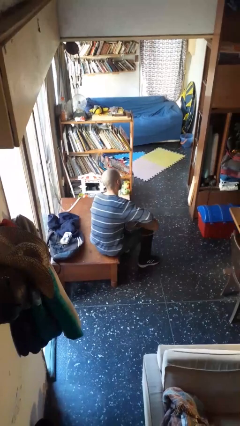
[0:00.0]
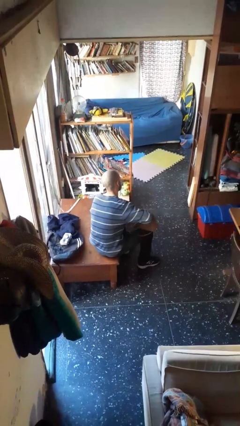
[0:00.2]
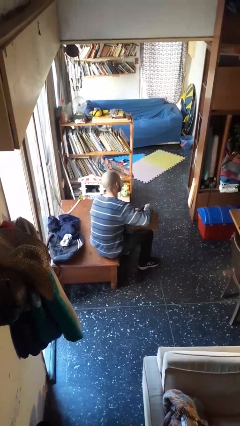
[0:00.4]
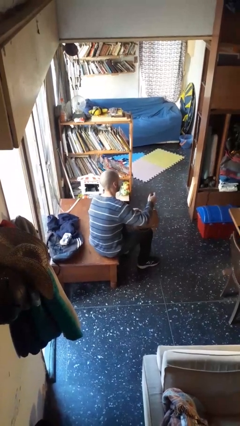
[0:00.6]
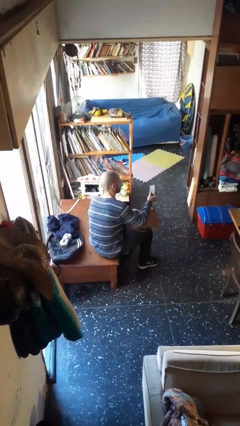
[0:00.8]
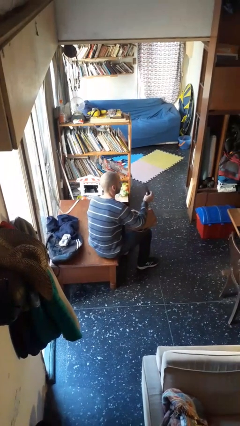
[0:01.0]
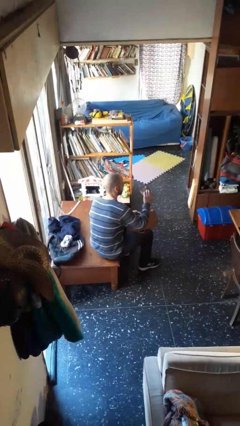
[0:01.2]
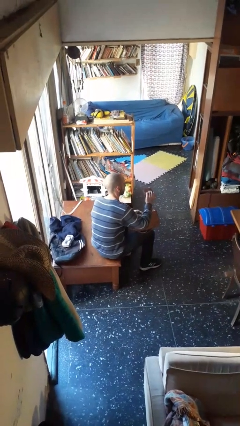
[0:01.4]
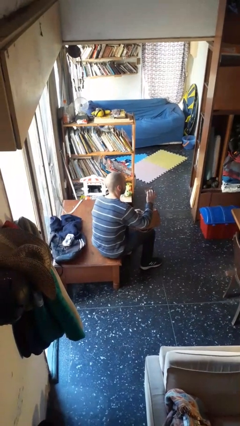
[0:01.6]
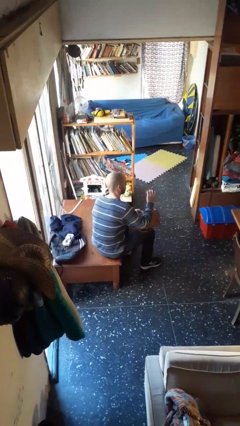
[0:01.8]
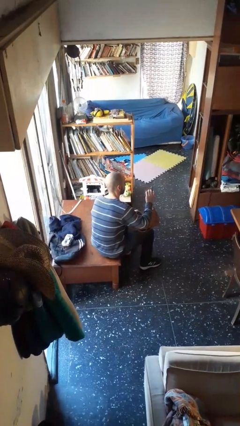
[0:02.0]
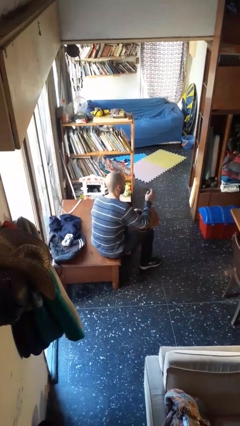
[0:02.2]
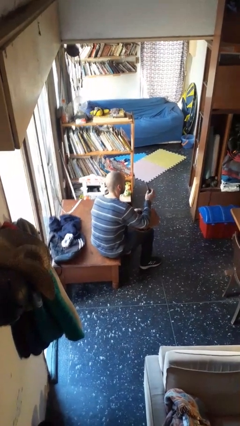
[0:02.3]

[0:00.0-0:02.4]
person takes object from purse

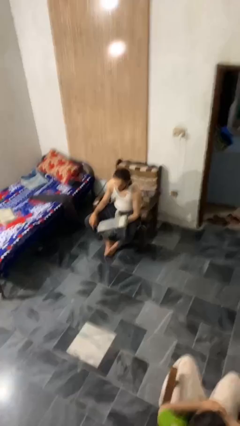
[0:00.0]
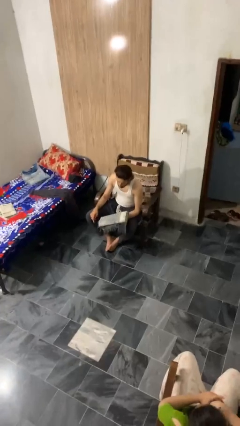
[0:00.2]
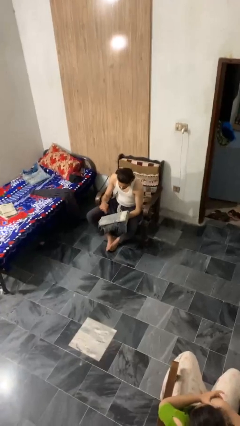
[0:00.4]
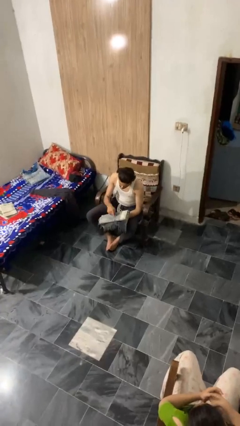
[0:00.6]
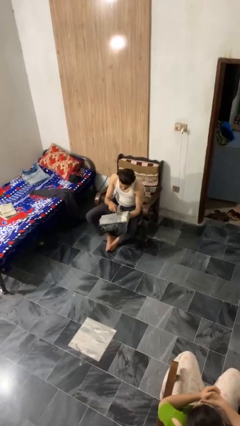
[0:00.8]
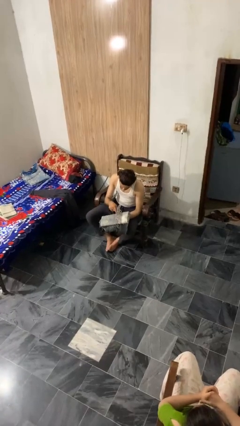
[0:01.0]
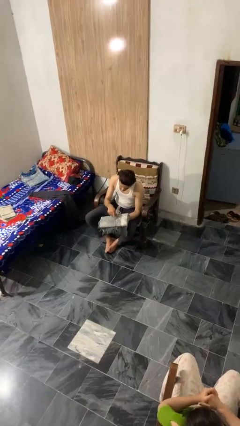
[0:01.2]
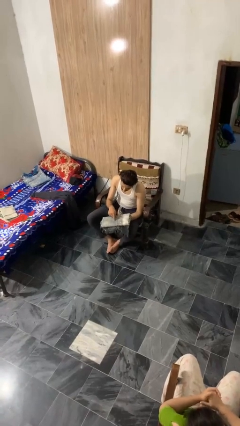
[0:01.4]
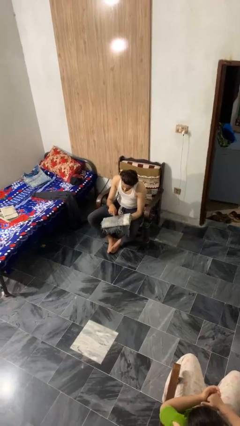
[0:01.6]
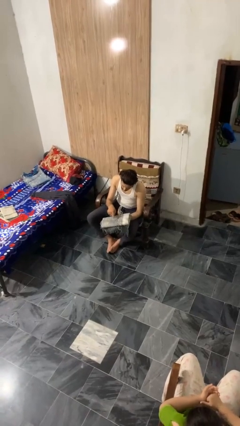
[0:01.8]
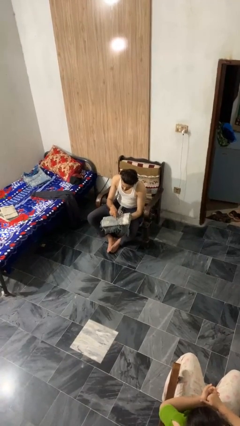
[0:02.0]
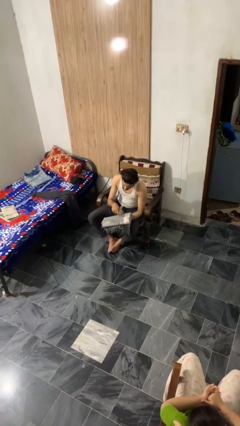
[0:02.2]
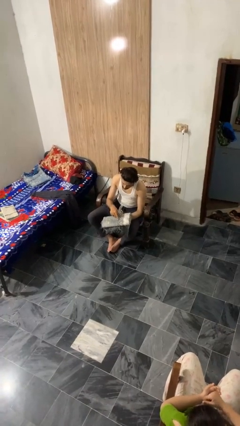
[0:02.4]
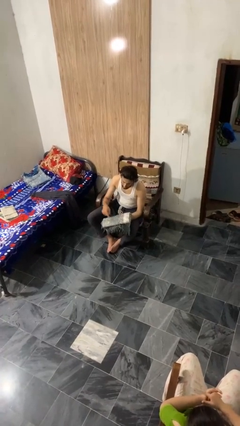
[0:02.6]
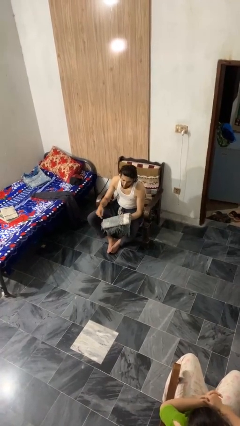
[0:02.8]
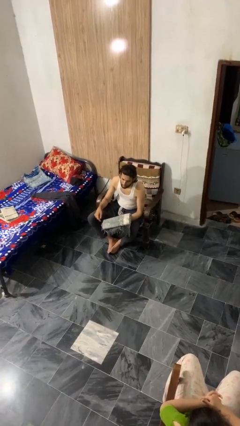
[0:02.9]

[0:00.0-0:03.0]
person taps object with finger

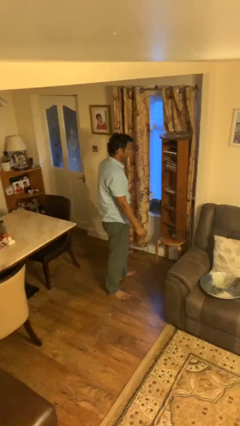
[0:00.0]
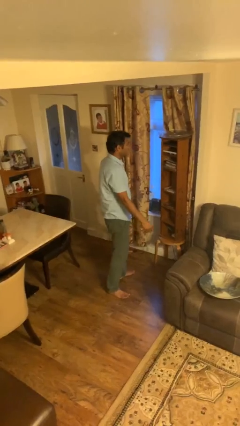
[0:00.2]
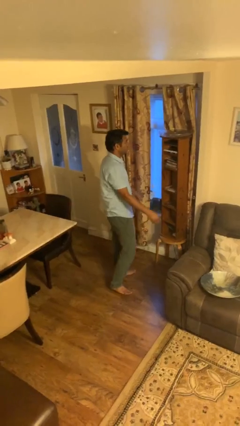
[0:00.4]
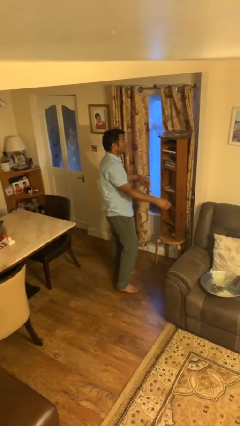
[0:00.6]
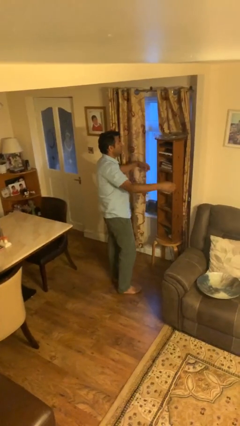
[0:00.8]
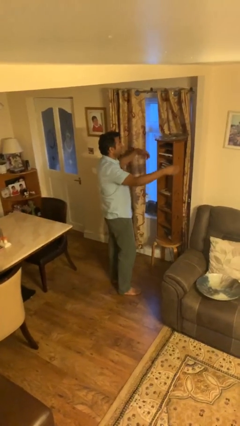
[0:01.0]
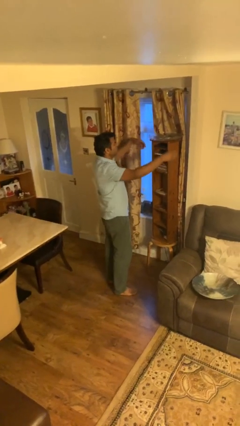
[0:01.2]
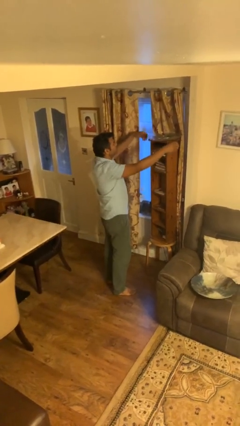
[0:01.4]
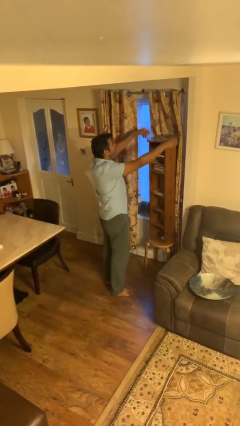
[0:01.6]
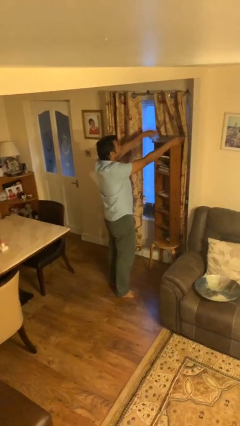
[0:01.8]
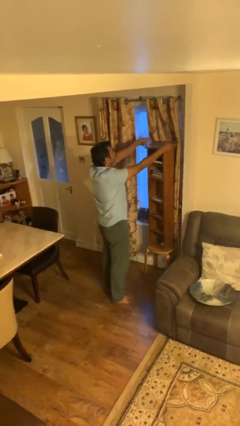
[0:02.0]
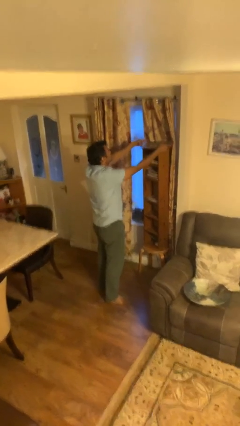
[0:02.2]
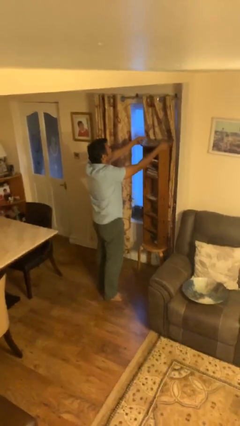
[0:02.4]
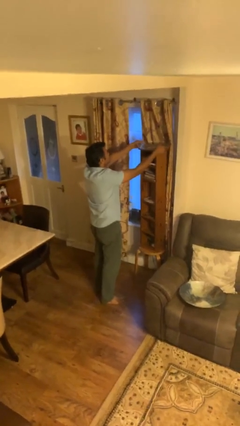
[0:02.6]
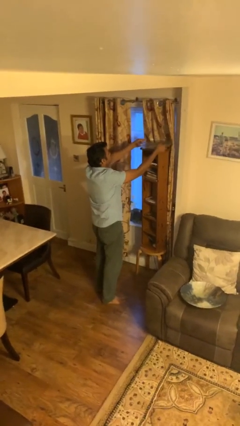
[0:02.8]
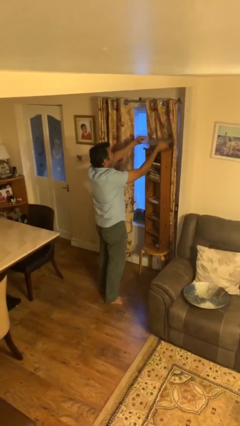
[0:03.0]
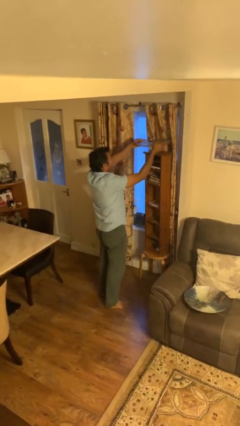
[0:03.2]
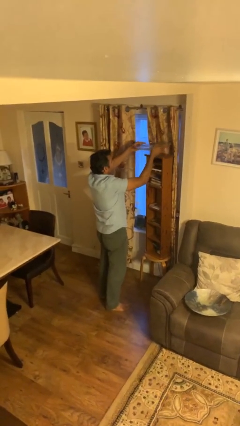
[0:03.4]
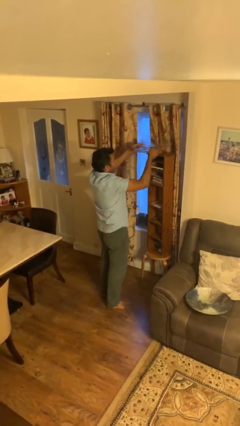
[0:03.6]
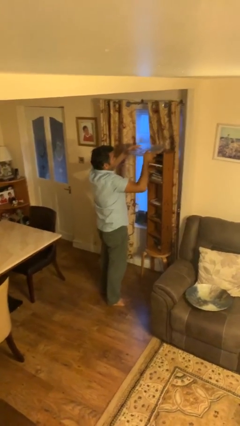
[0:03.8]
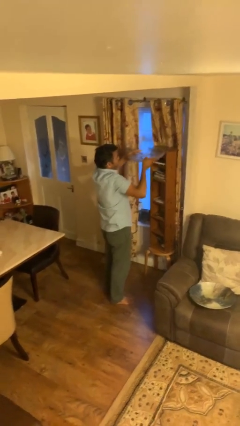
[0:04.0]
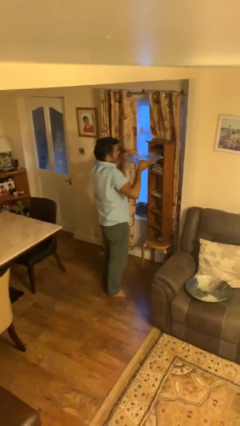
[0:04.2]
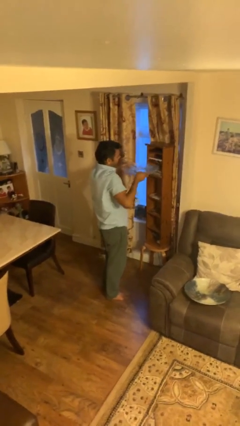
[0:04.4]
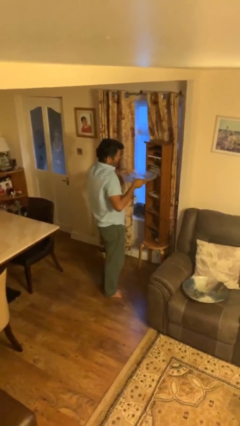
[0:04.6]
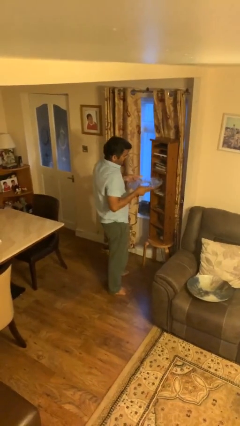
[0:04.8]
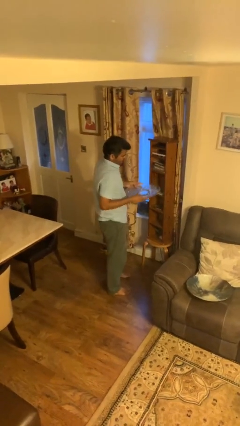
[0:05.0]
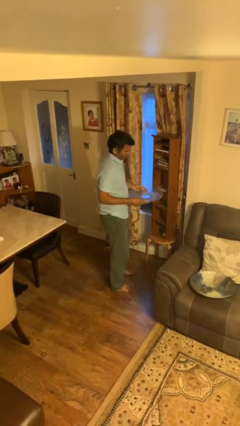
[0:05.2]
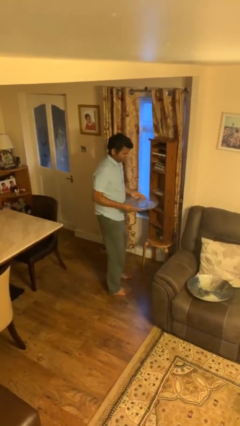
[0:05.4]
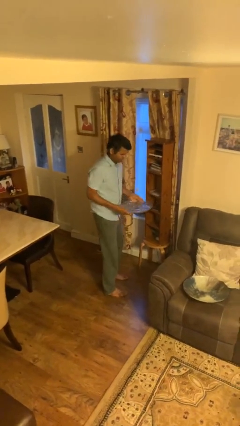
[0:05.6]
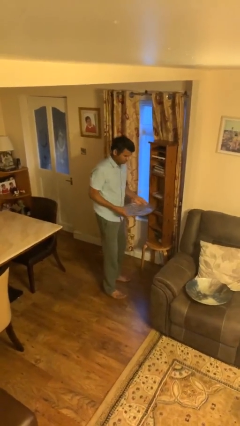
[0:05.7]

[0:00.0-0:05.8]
person picks up object from shelf

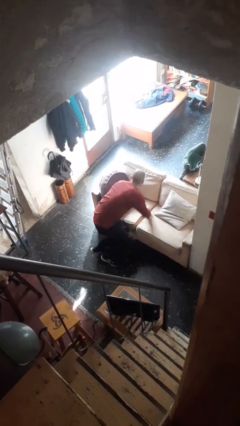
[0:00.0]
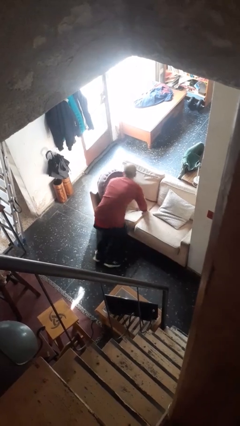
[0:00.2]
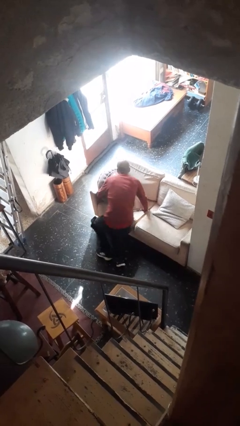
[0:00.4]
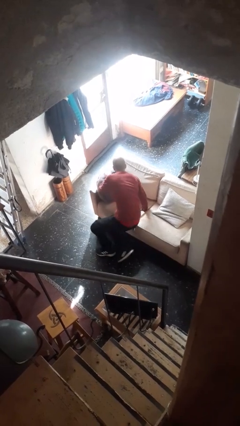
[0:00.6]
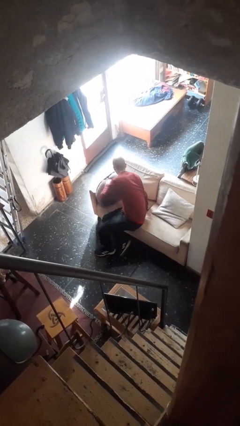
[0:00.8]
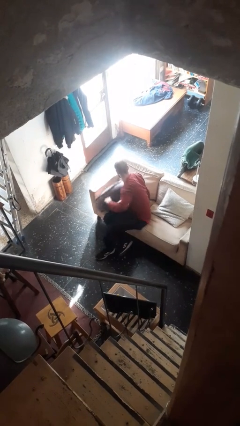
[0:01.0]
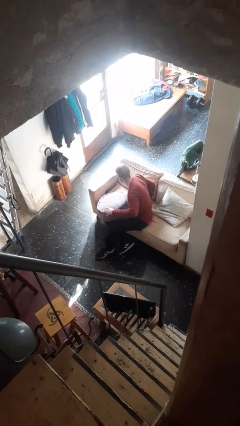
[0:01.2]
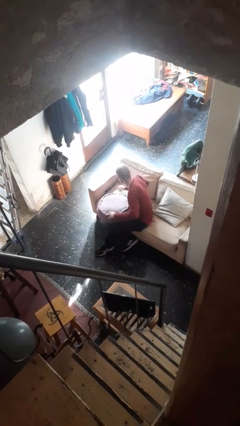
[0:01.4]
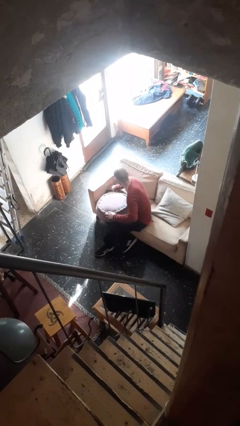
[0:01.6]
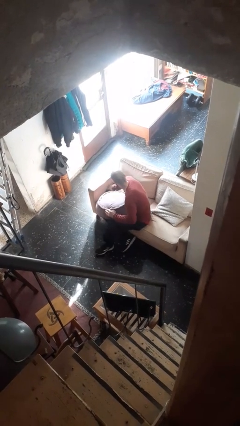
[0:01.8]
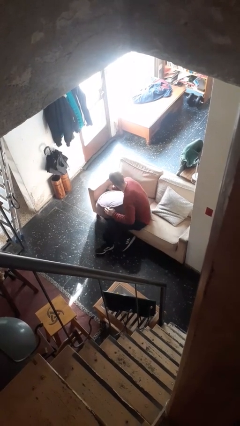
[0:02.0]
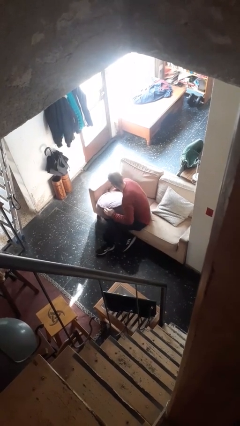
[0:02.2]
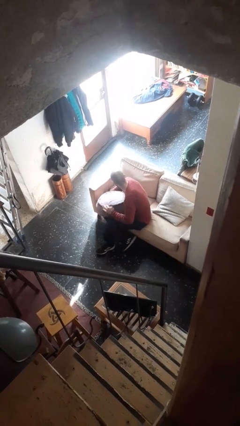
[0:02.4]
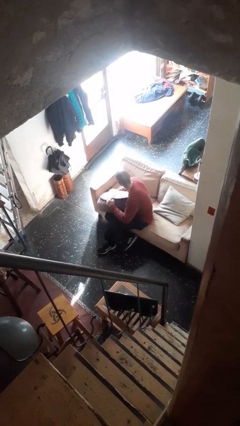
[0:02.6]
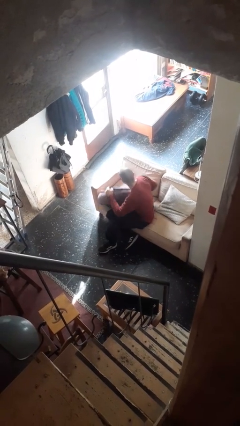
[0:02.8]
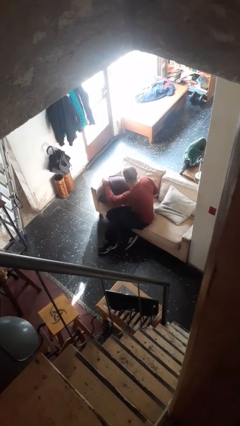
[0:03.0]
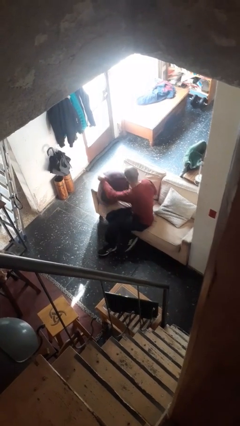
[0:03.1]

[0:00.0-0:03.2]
person searches in couch

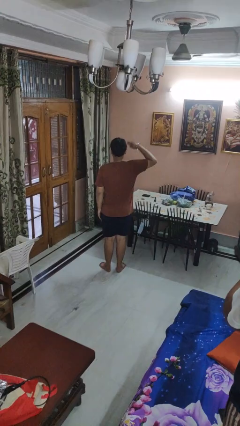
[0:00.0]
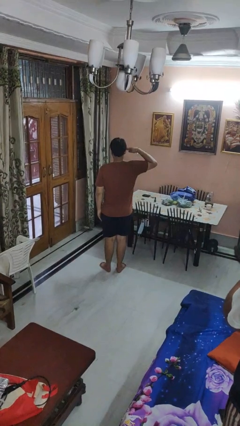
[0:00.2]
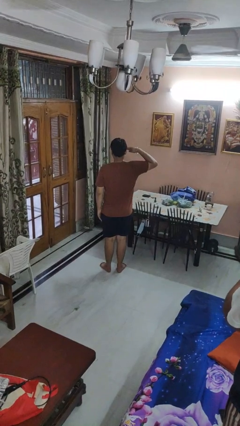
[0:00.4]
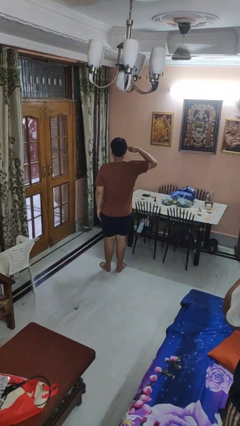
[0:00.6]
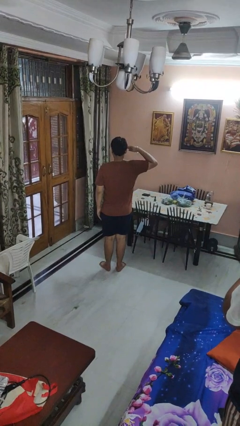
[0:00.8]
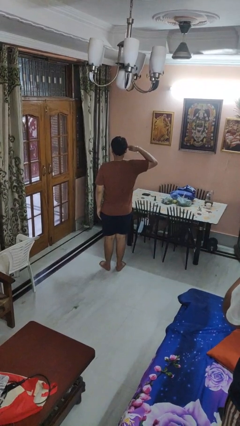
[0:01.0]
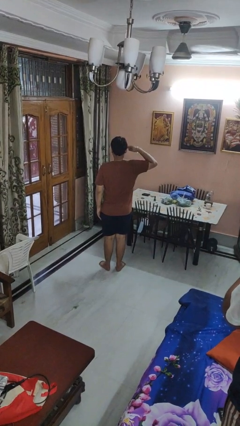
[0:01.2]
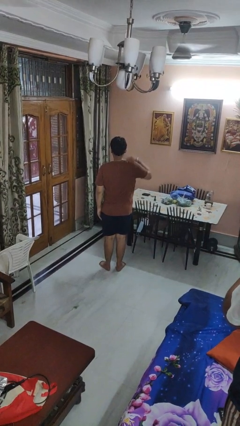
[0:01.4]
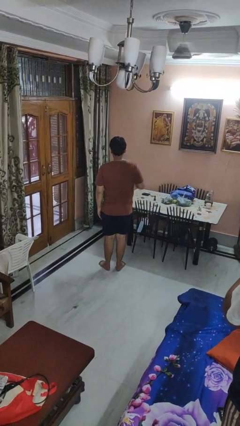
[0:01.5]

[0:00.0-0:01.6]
person salutes

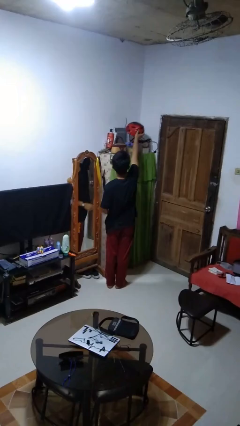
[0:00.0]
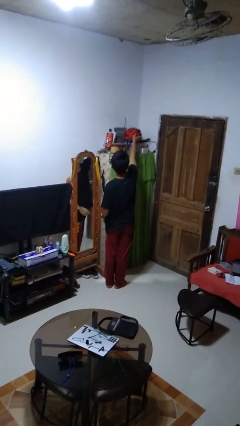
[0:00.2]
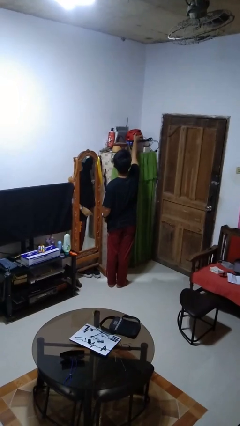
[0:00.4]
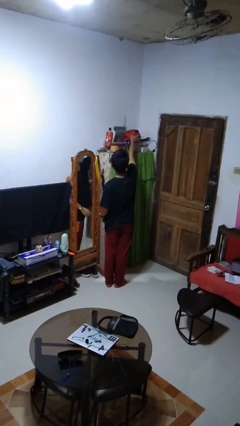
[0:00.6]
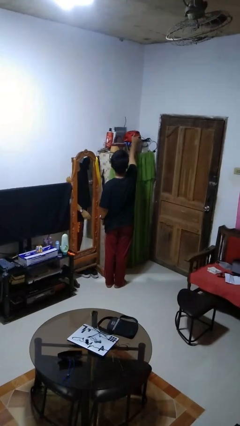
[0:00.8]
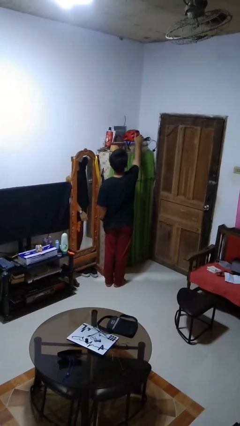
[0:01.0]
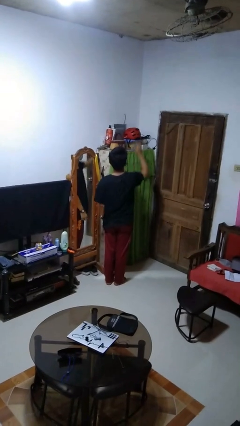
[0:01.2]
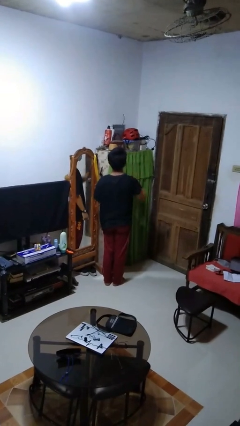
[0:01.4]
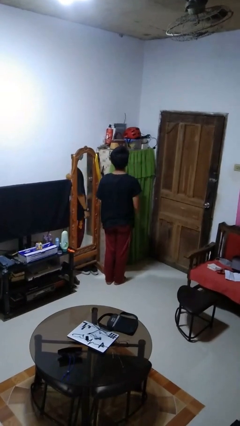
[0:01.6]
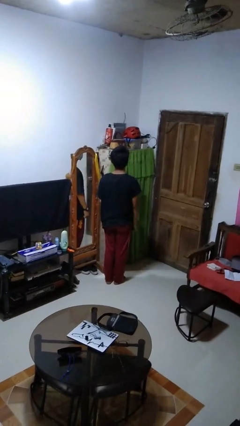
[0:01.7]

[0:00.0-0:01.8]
person puts down object on shelf
